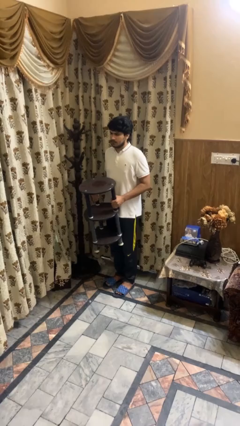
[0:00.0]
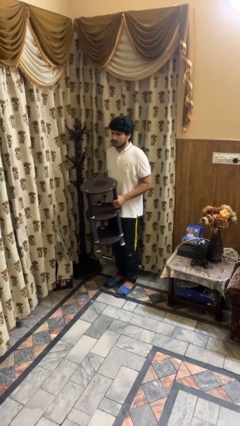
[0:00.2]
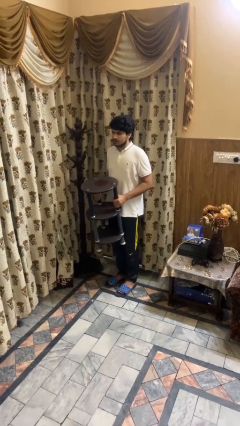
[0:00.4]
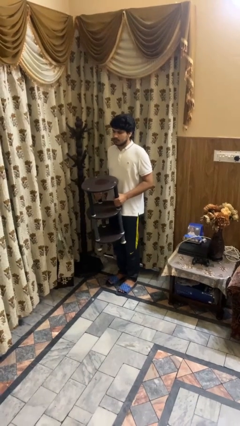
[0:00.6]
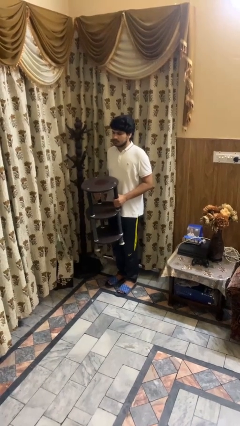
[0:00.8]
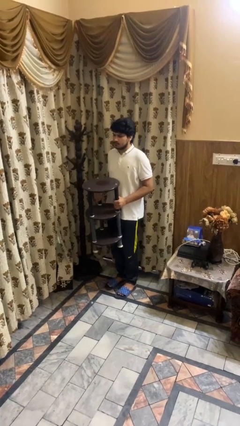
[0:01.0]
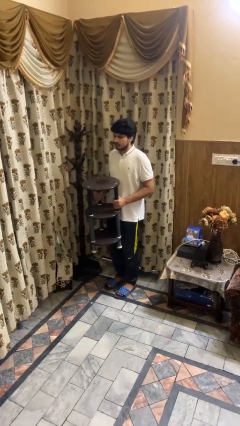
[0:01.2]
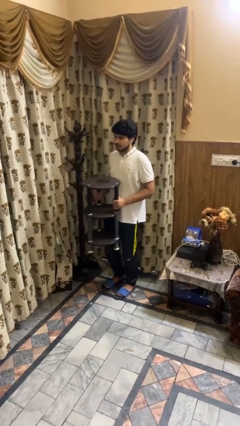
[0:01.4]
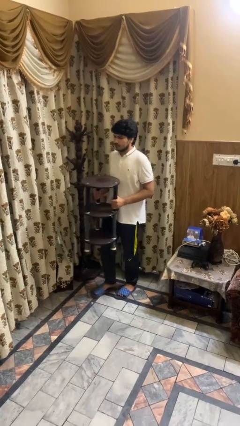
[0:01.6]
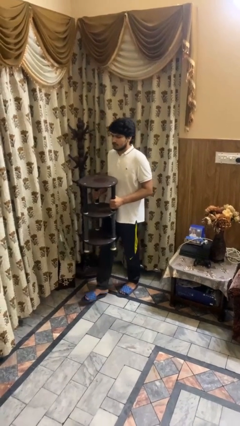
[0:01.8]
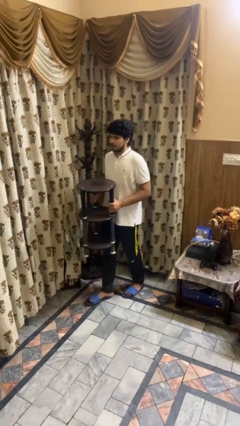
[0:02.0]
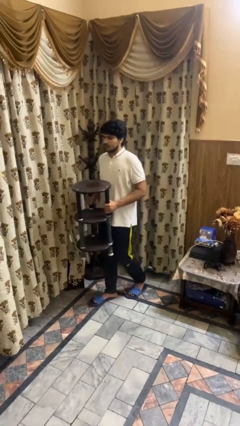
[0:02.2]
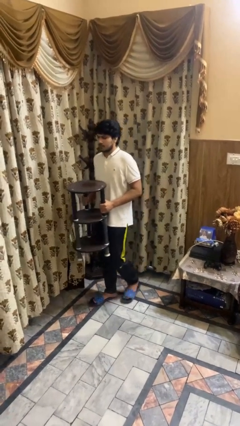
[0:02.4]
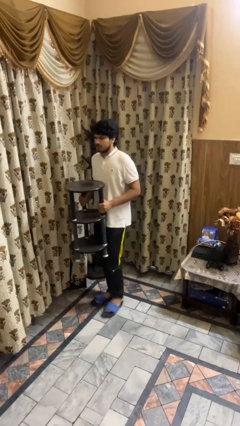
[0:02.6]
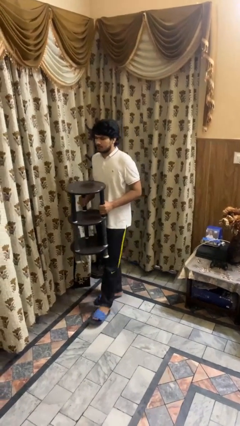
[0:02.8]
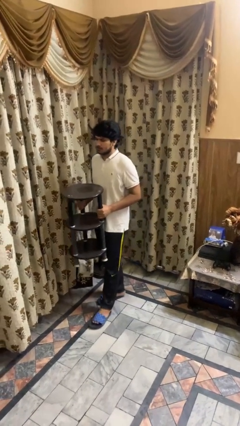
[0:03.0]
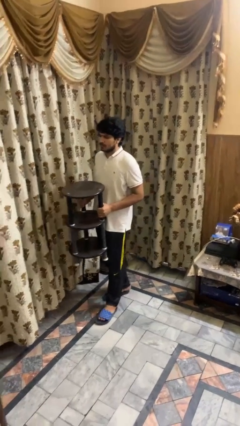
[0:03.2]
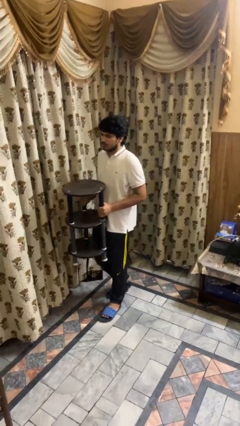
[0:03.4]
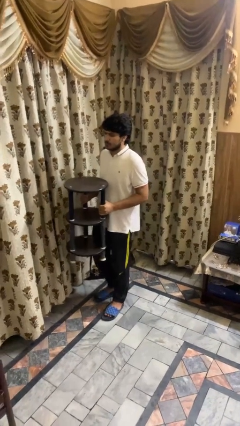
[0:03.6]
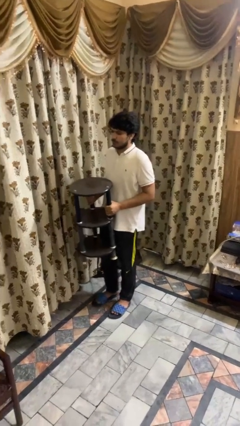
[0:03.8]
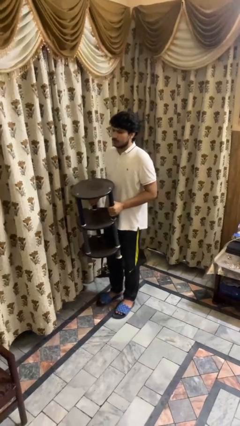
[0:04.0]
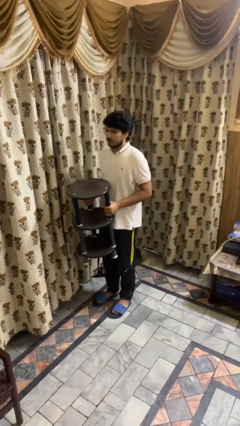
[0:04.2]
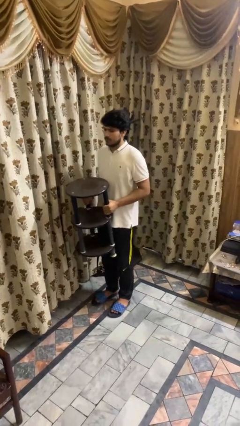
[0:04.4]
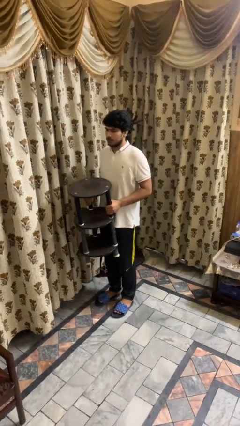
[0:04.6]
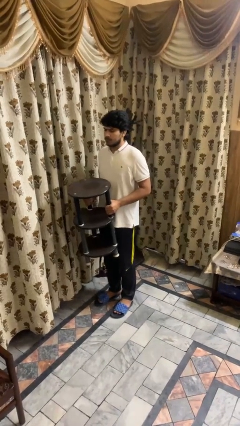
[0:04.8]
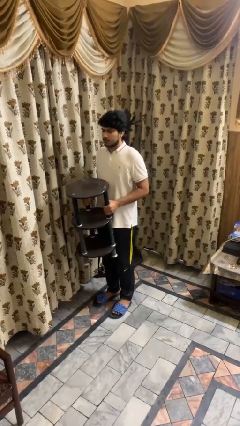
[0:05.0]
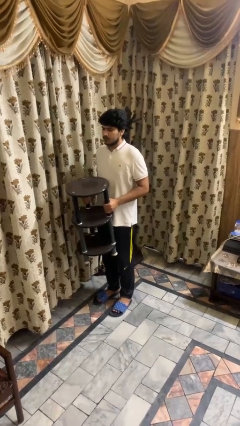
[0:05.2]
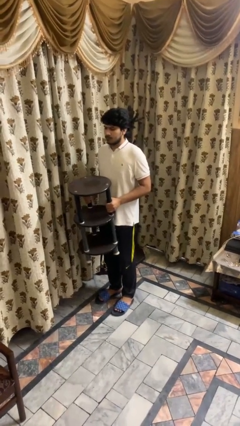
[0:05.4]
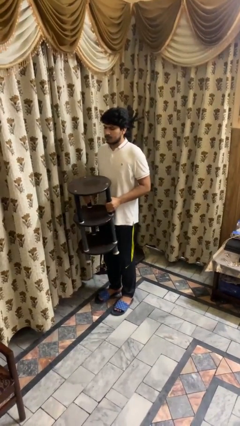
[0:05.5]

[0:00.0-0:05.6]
person carries furniture

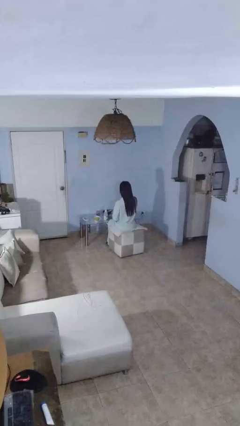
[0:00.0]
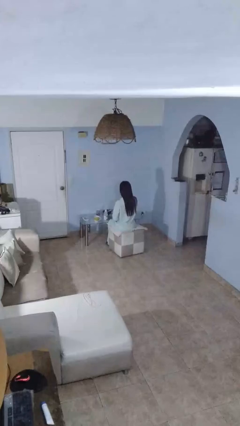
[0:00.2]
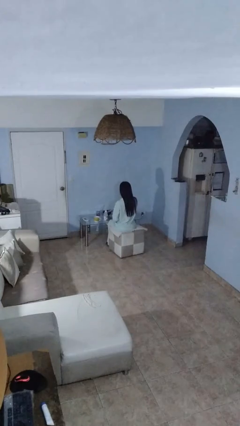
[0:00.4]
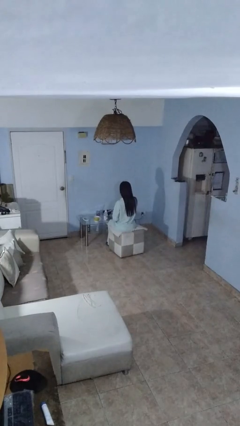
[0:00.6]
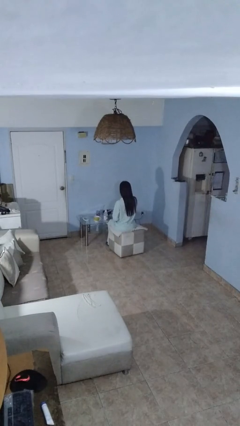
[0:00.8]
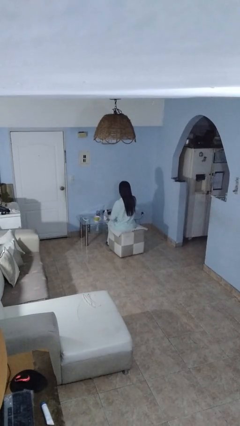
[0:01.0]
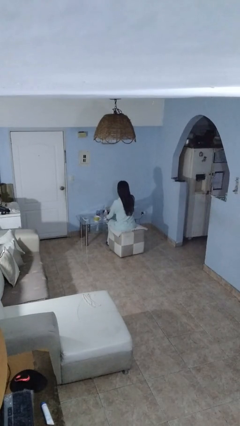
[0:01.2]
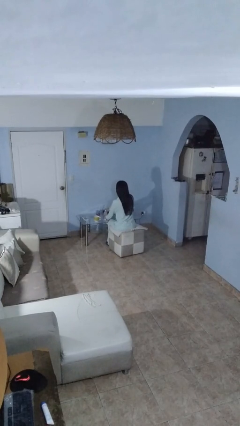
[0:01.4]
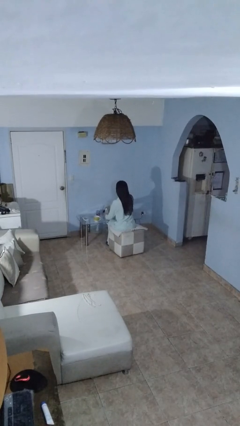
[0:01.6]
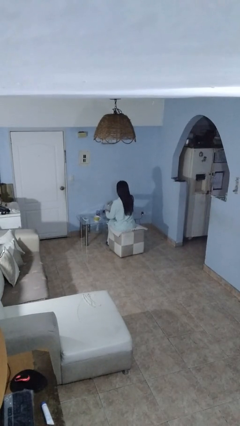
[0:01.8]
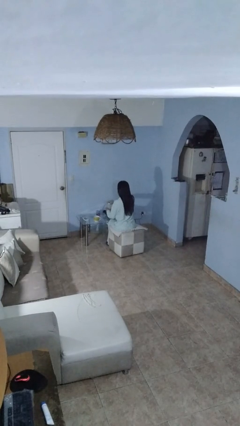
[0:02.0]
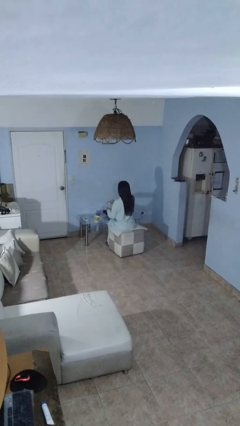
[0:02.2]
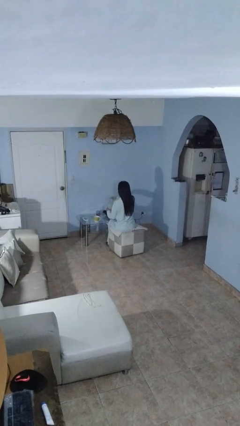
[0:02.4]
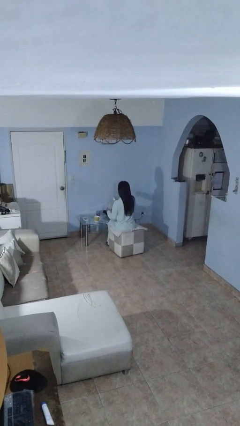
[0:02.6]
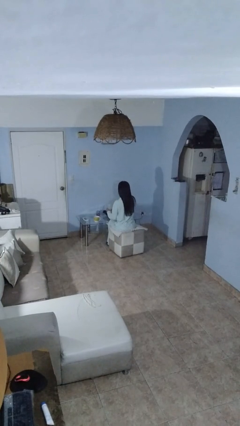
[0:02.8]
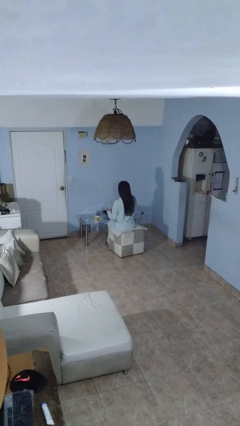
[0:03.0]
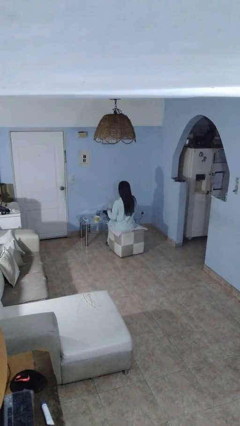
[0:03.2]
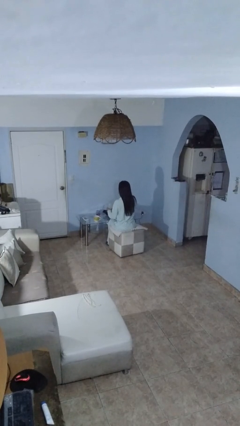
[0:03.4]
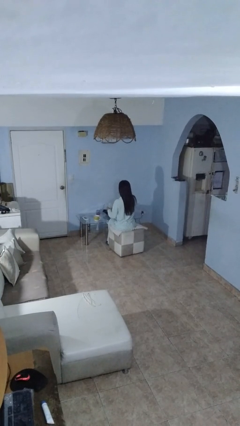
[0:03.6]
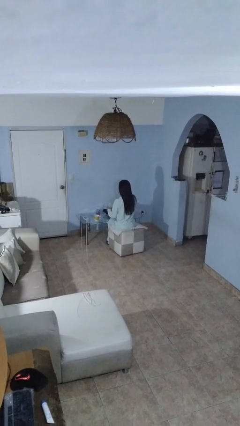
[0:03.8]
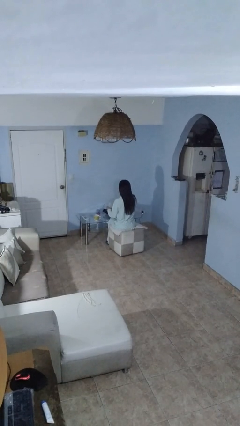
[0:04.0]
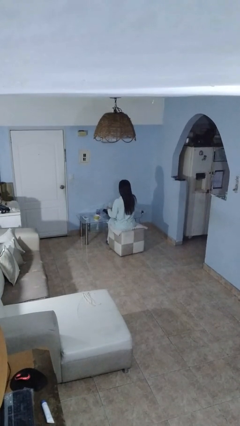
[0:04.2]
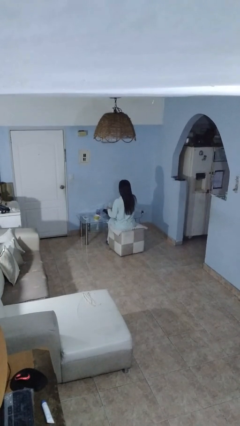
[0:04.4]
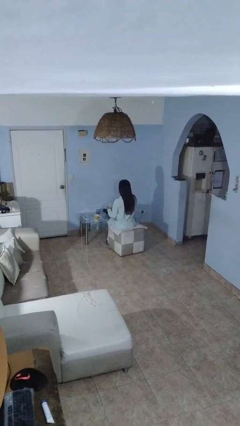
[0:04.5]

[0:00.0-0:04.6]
person unscrews lid from bottle

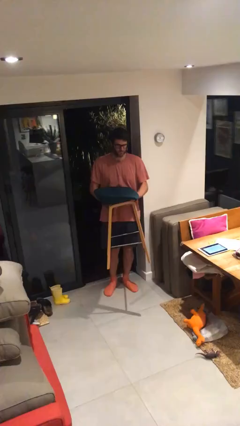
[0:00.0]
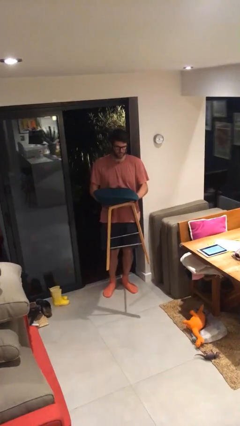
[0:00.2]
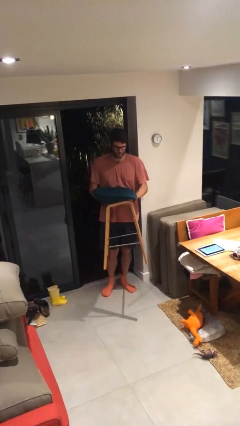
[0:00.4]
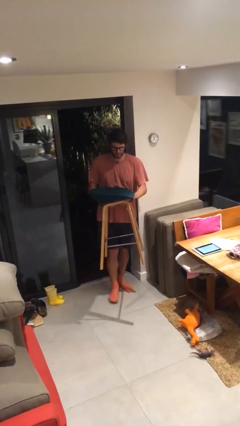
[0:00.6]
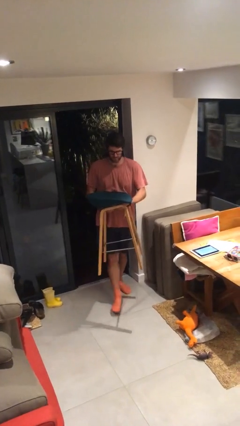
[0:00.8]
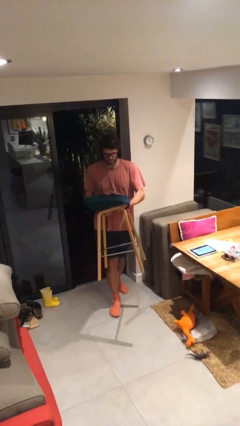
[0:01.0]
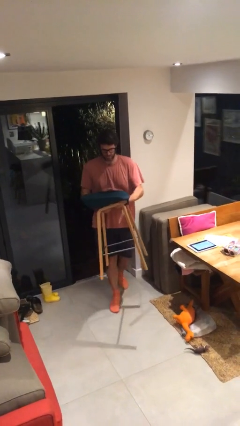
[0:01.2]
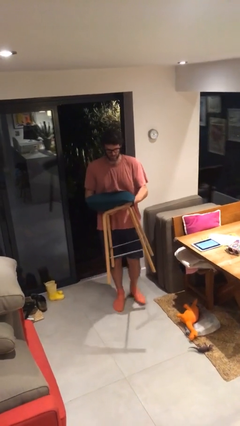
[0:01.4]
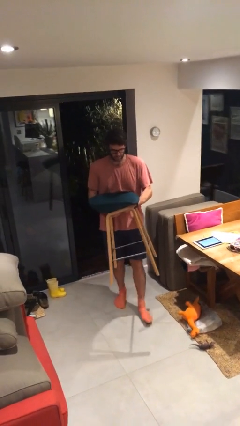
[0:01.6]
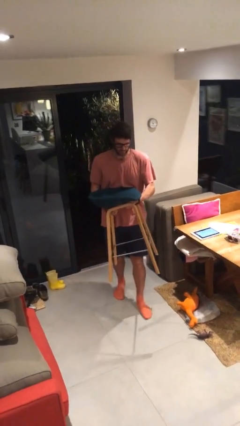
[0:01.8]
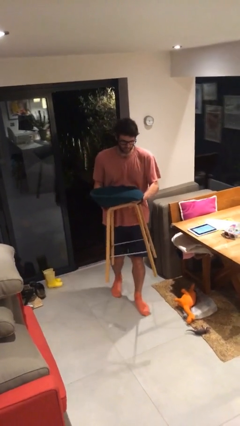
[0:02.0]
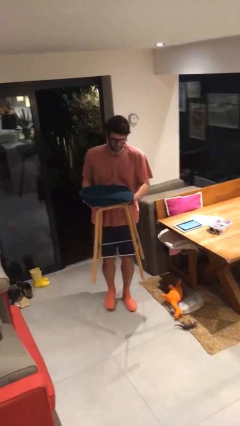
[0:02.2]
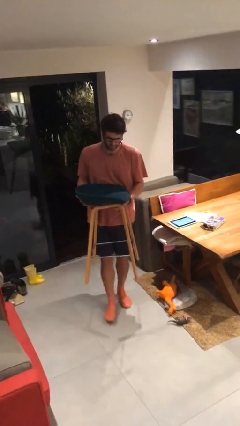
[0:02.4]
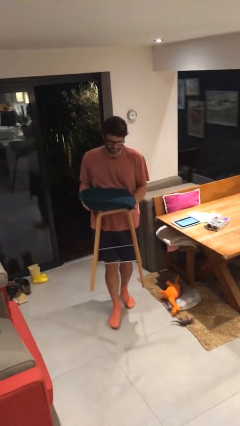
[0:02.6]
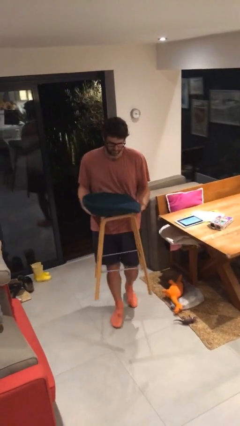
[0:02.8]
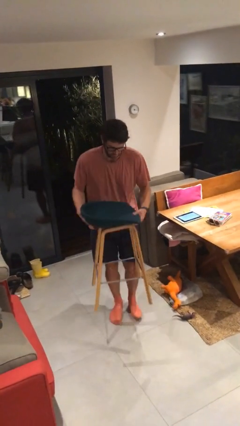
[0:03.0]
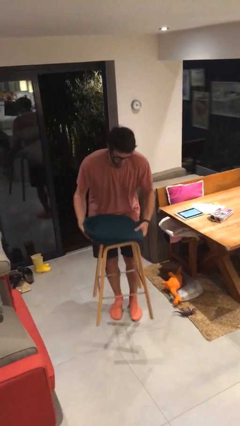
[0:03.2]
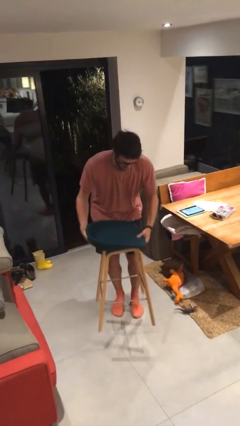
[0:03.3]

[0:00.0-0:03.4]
person carries heavy object

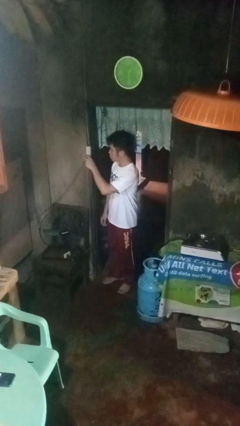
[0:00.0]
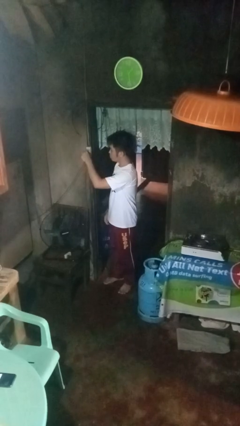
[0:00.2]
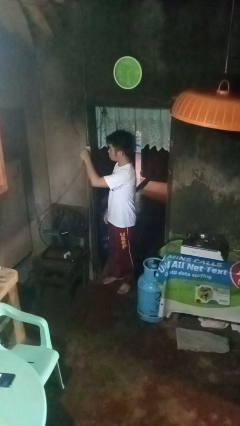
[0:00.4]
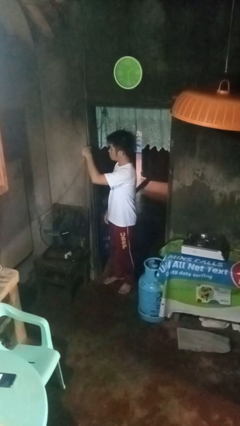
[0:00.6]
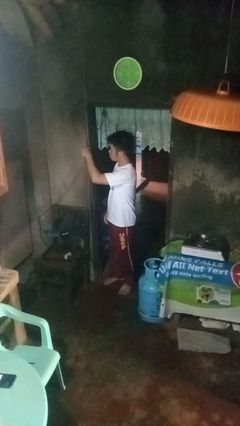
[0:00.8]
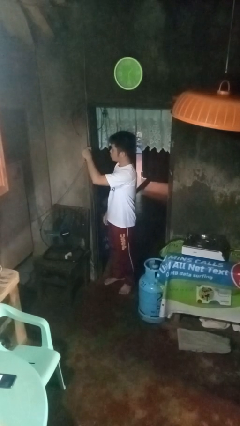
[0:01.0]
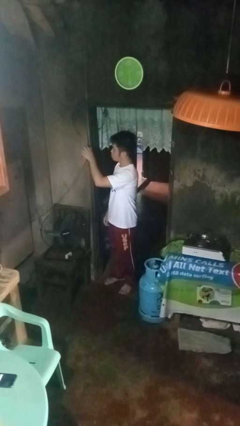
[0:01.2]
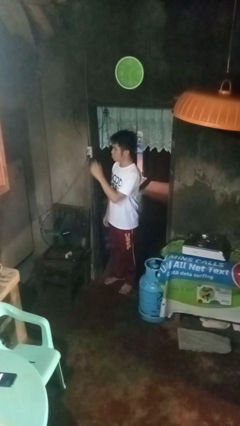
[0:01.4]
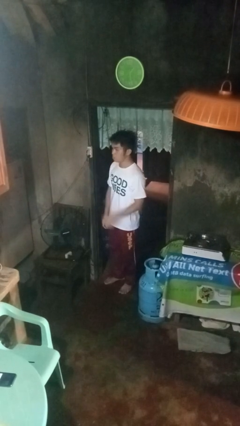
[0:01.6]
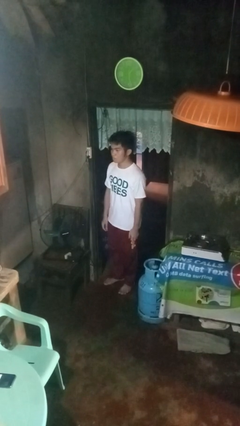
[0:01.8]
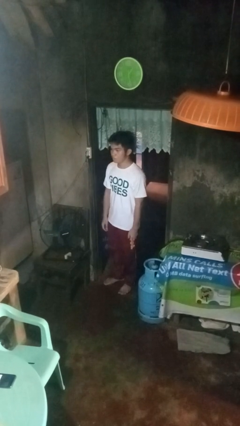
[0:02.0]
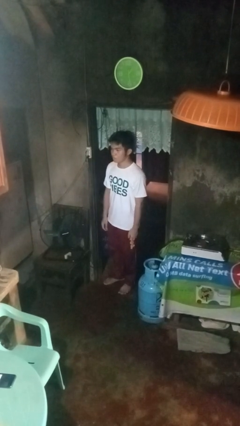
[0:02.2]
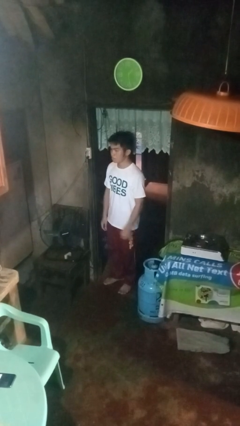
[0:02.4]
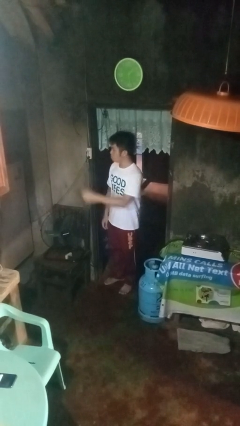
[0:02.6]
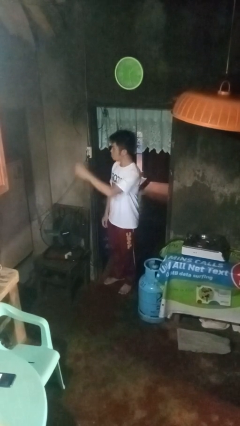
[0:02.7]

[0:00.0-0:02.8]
person plugs into electrical socket

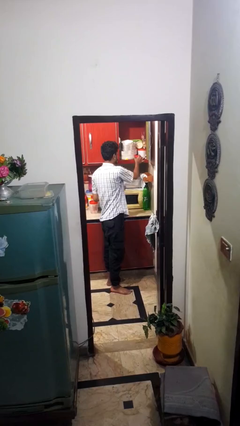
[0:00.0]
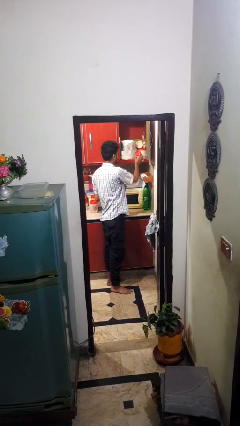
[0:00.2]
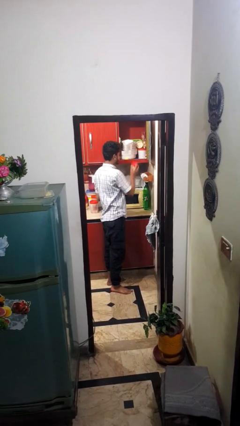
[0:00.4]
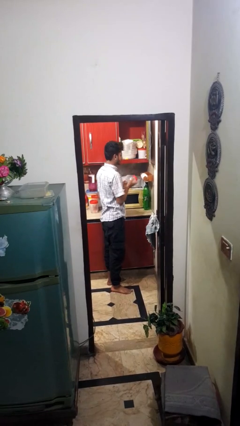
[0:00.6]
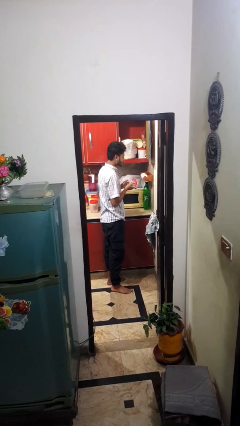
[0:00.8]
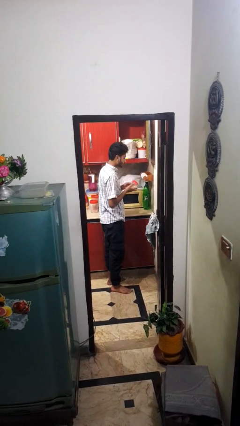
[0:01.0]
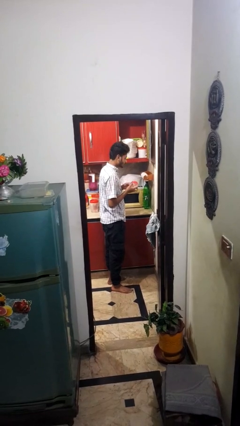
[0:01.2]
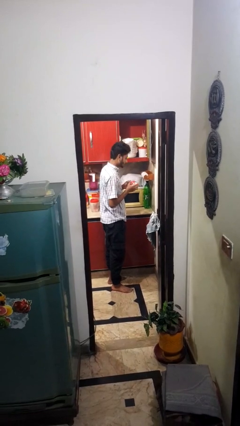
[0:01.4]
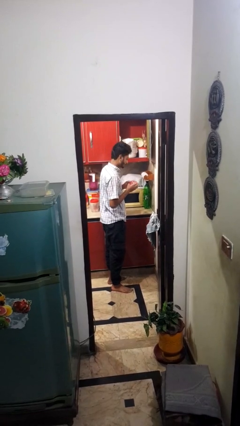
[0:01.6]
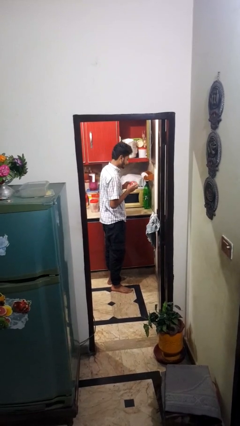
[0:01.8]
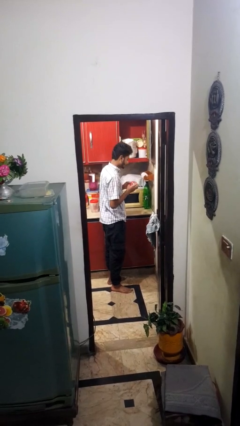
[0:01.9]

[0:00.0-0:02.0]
person picks up object from cabinet
